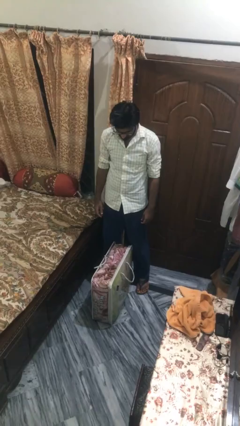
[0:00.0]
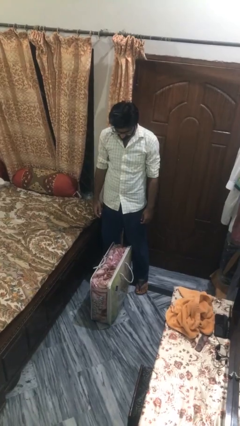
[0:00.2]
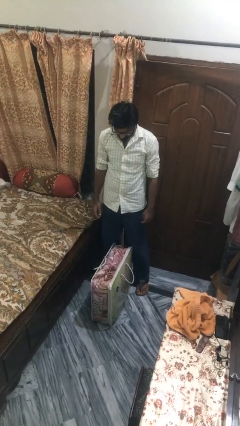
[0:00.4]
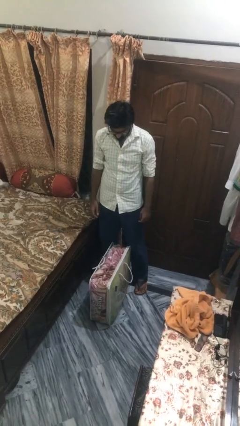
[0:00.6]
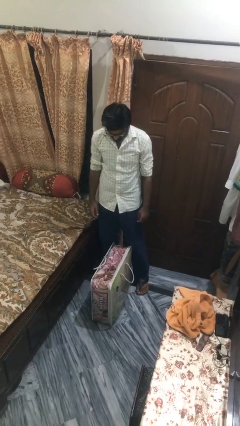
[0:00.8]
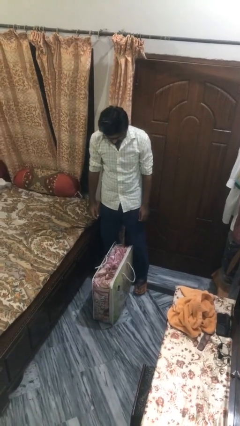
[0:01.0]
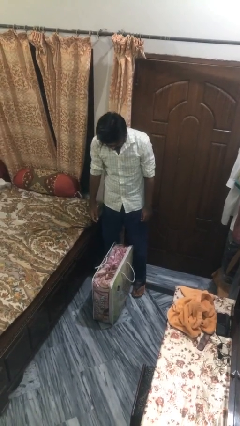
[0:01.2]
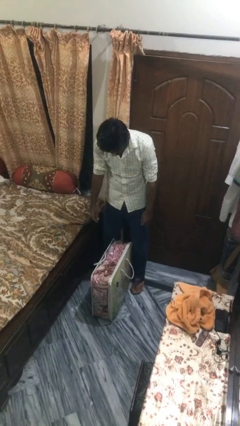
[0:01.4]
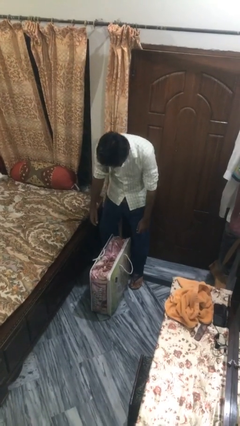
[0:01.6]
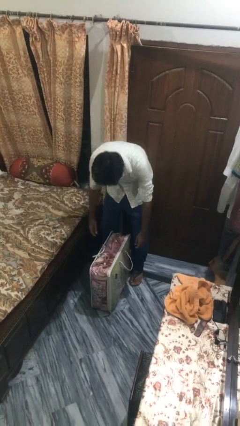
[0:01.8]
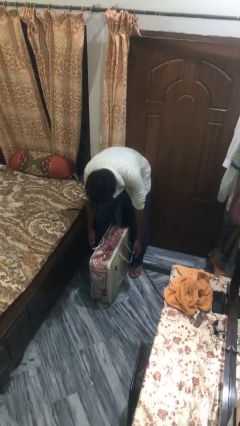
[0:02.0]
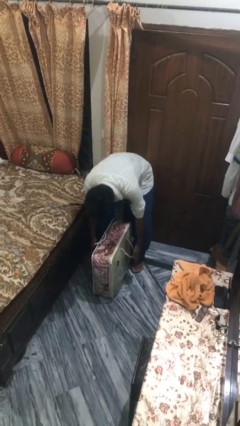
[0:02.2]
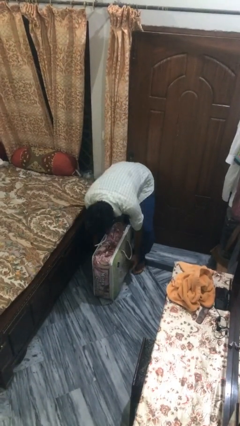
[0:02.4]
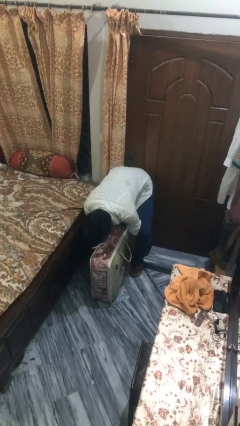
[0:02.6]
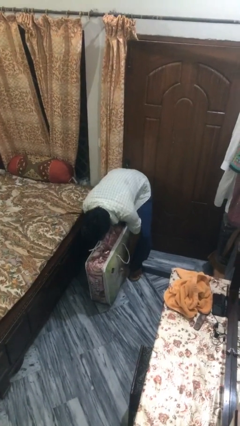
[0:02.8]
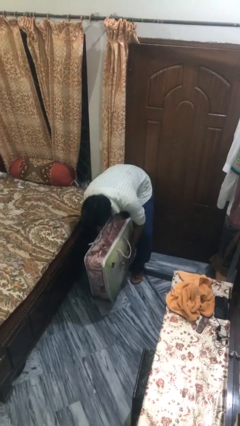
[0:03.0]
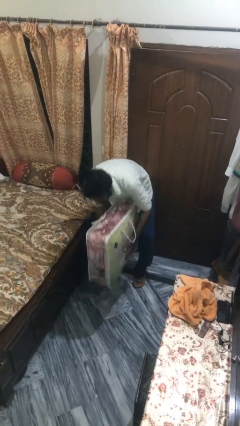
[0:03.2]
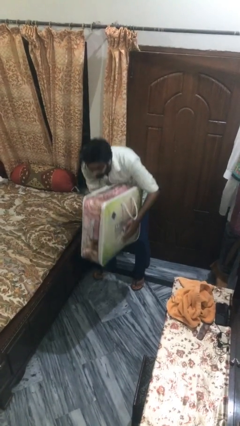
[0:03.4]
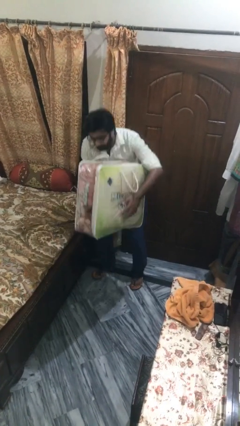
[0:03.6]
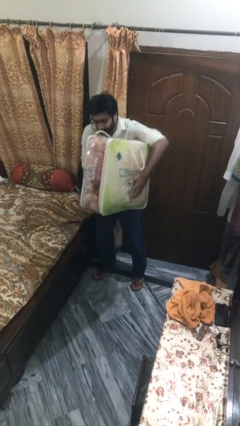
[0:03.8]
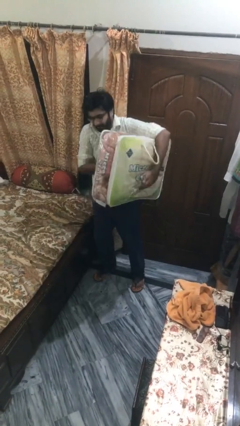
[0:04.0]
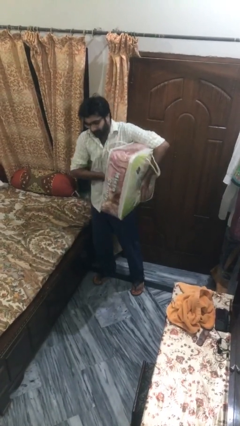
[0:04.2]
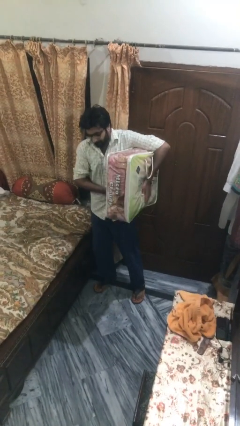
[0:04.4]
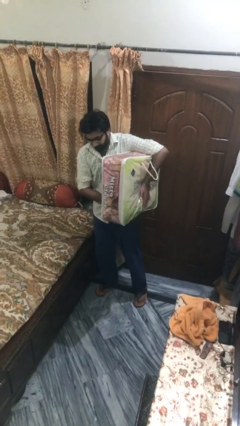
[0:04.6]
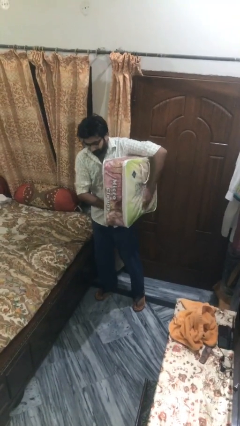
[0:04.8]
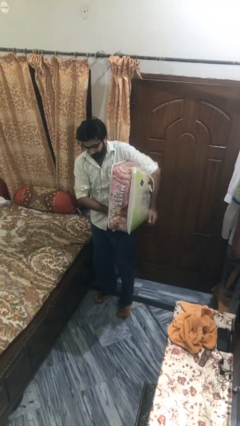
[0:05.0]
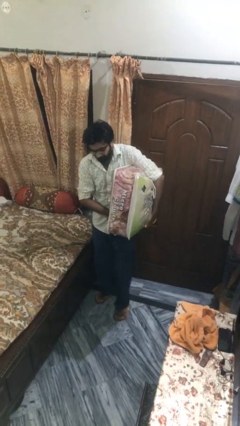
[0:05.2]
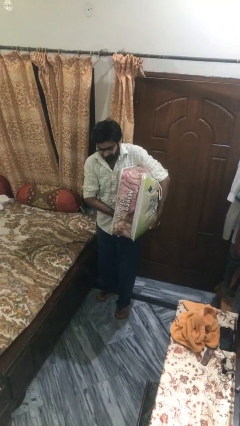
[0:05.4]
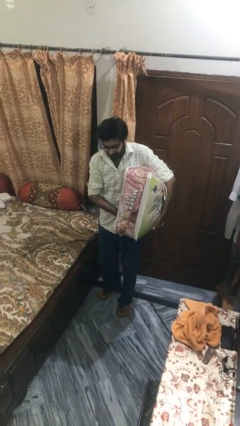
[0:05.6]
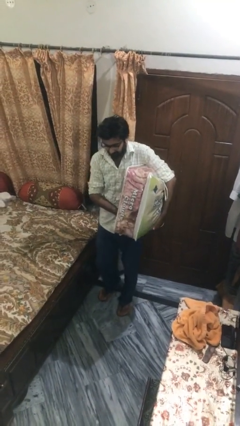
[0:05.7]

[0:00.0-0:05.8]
person picks up object from floor

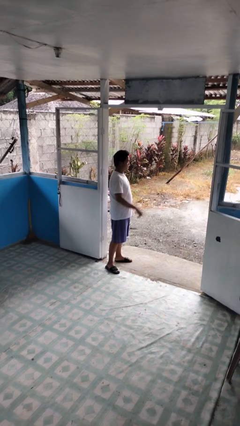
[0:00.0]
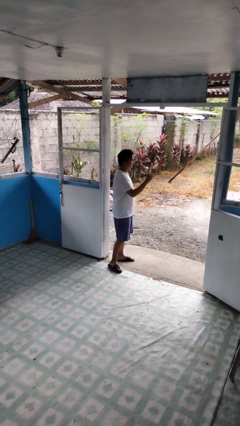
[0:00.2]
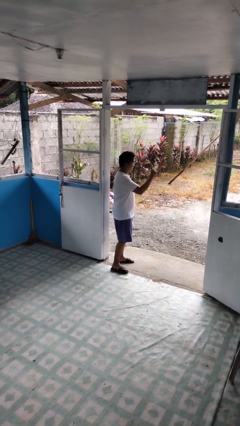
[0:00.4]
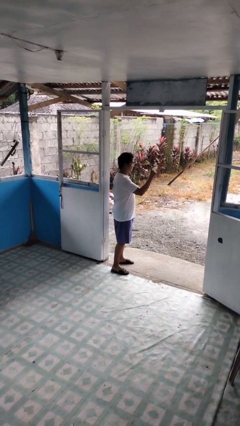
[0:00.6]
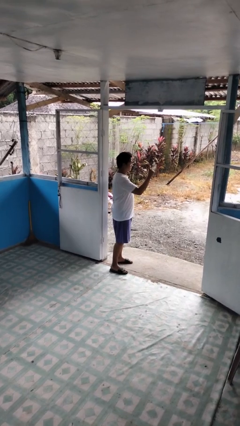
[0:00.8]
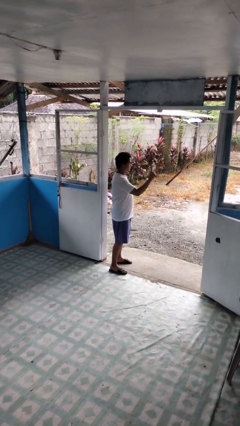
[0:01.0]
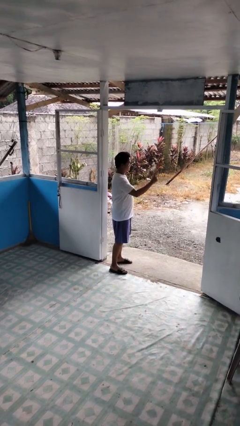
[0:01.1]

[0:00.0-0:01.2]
person gestures number one

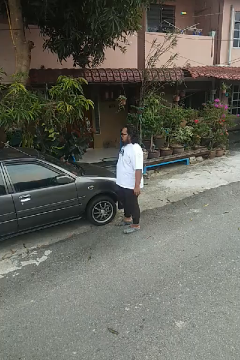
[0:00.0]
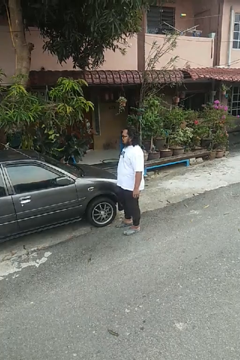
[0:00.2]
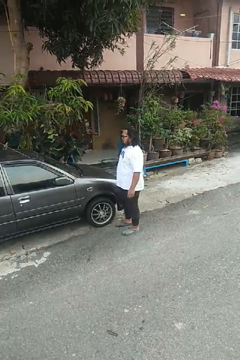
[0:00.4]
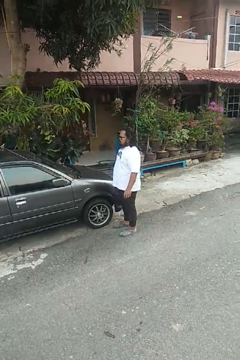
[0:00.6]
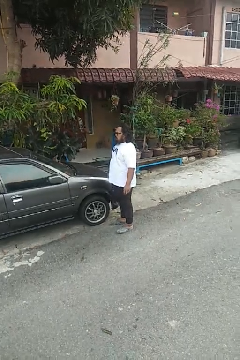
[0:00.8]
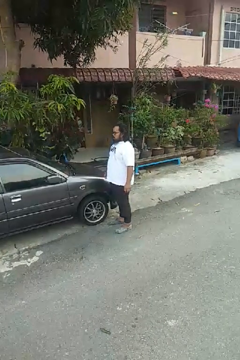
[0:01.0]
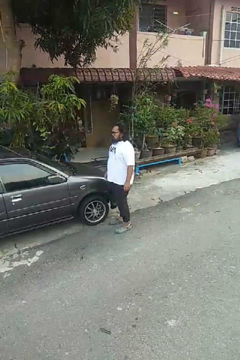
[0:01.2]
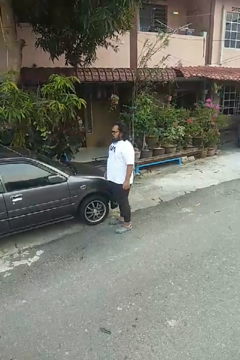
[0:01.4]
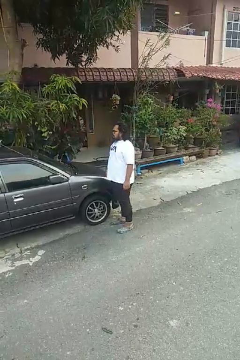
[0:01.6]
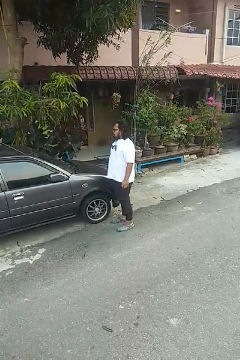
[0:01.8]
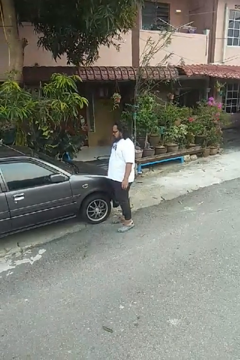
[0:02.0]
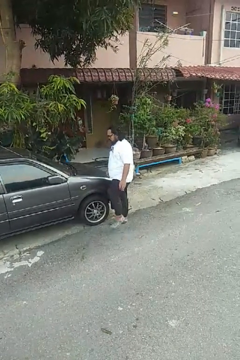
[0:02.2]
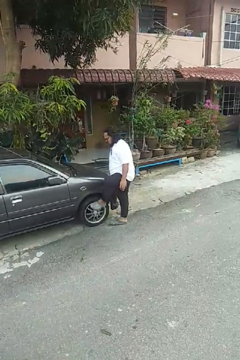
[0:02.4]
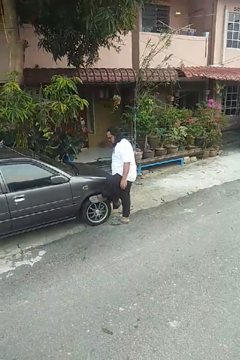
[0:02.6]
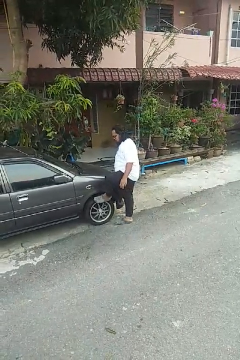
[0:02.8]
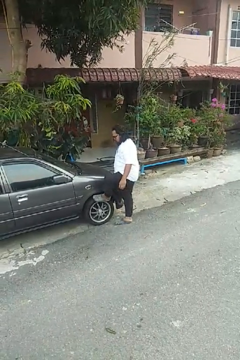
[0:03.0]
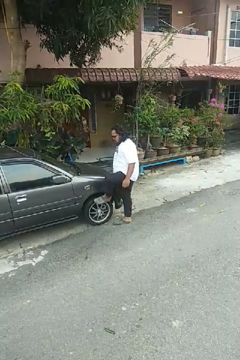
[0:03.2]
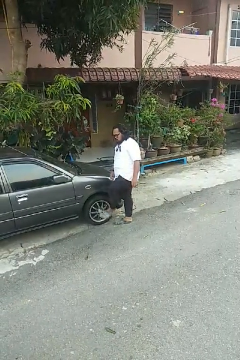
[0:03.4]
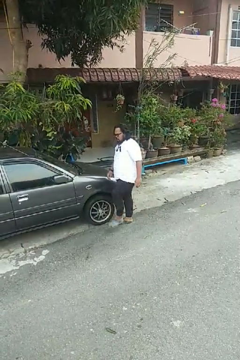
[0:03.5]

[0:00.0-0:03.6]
person kicks car tires

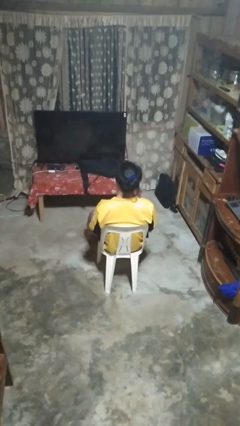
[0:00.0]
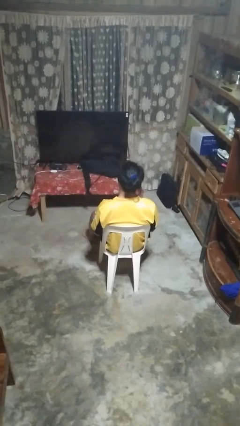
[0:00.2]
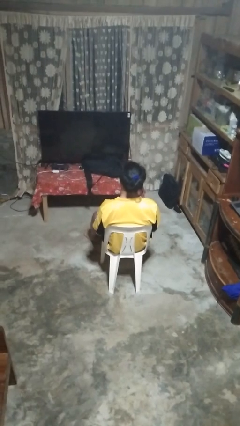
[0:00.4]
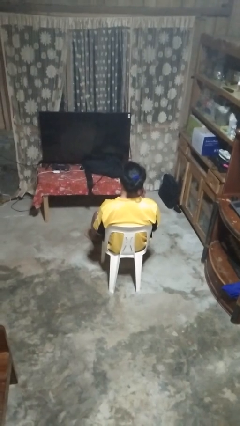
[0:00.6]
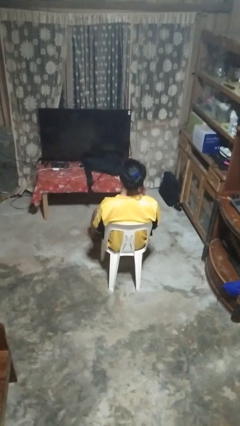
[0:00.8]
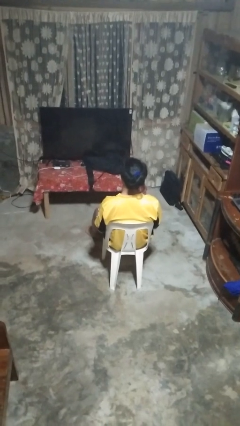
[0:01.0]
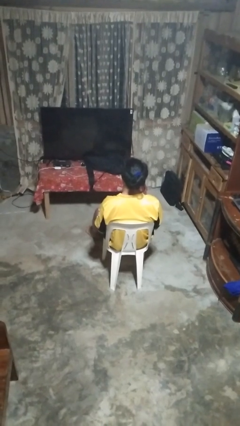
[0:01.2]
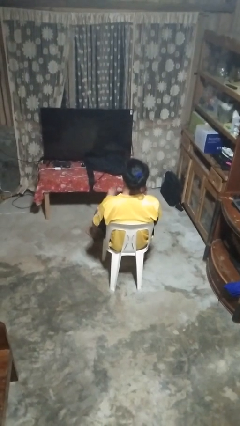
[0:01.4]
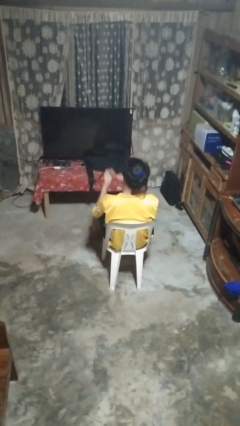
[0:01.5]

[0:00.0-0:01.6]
person files fingernails

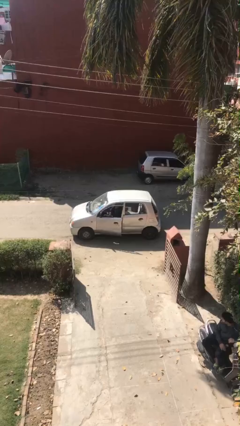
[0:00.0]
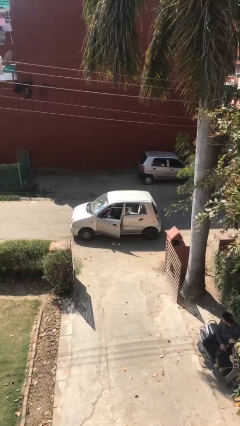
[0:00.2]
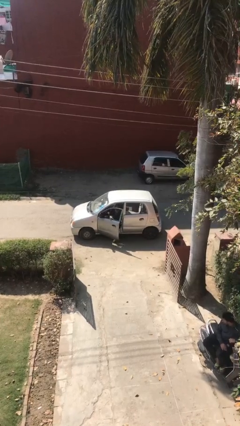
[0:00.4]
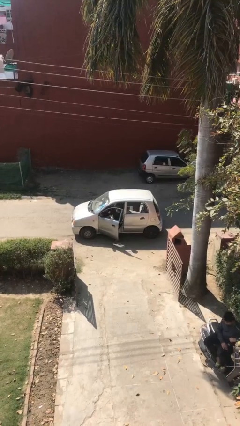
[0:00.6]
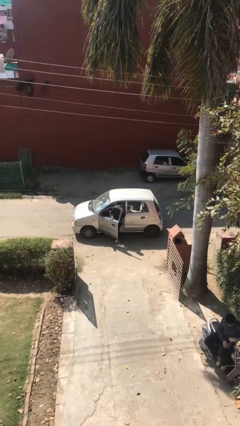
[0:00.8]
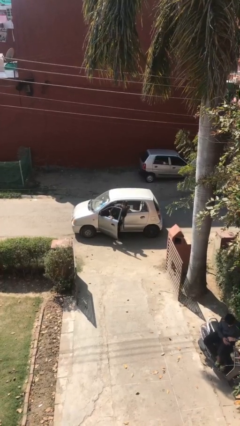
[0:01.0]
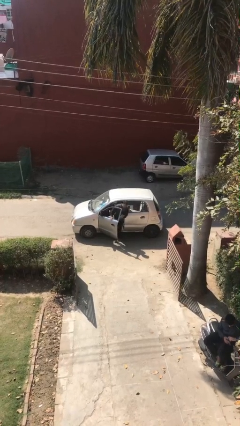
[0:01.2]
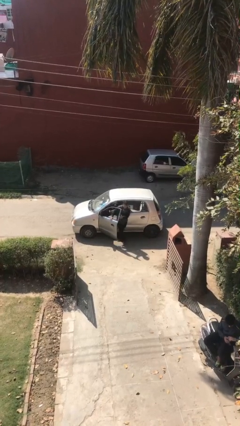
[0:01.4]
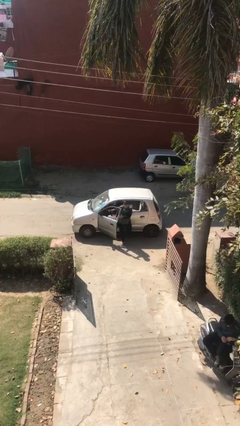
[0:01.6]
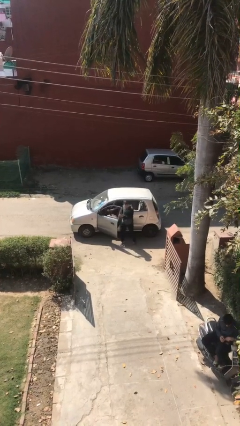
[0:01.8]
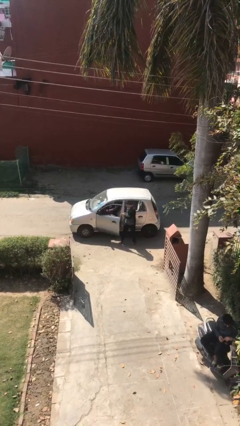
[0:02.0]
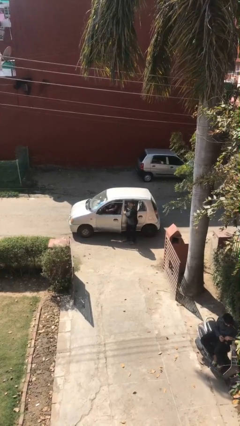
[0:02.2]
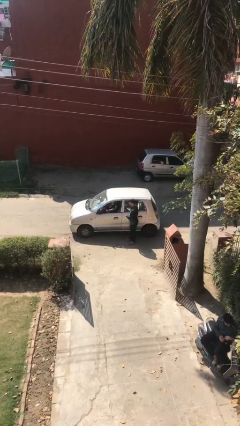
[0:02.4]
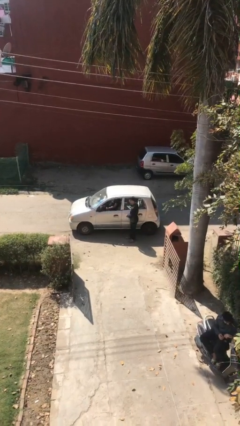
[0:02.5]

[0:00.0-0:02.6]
car drops off person

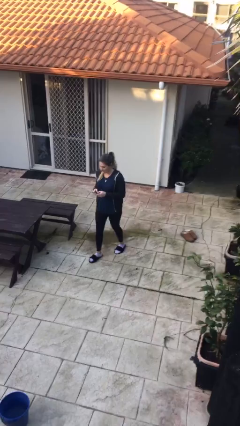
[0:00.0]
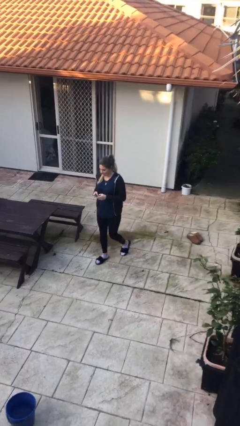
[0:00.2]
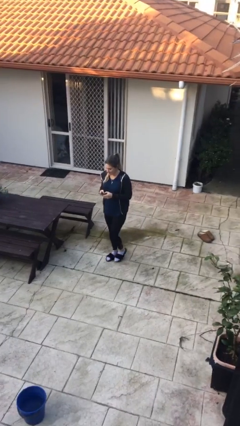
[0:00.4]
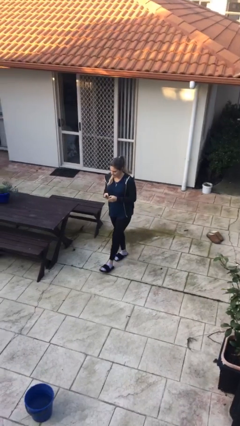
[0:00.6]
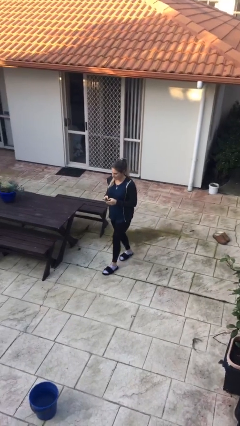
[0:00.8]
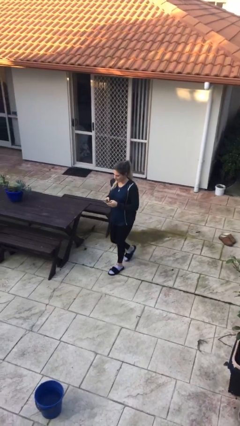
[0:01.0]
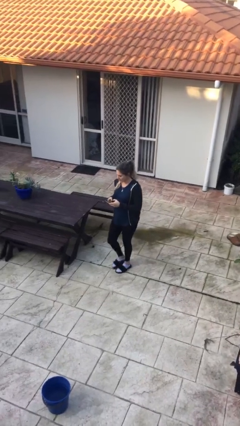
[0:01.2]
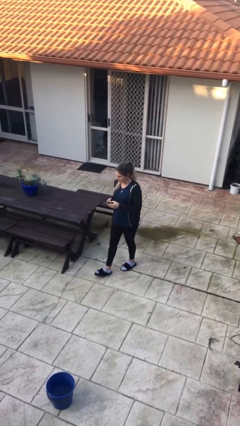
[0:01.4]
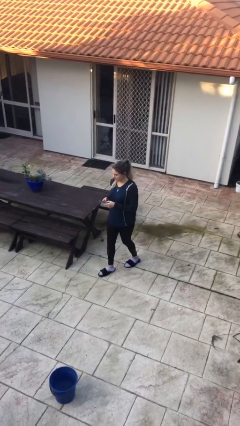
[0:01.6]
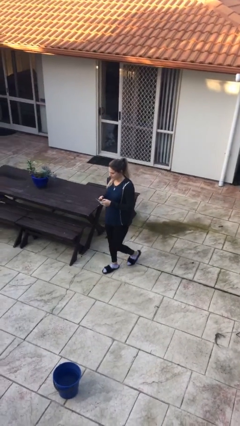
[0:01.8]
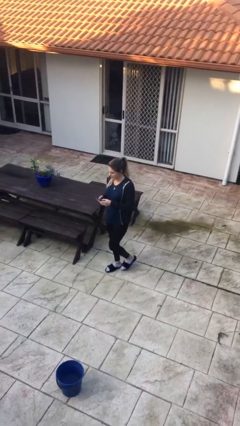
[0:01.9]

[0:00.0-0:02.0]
person texts on phone

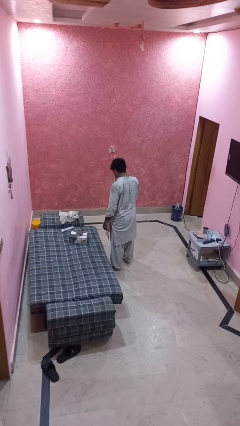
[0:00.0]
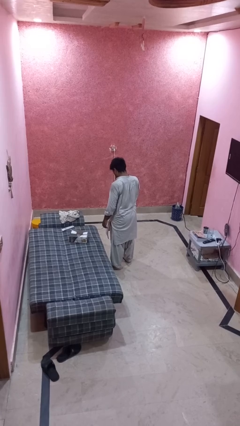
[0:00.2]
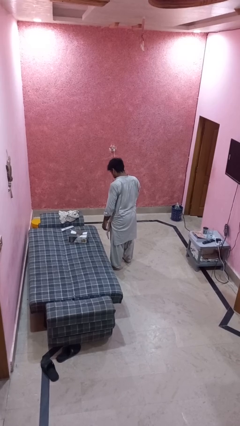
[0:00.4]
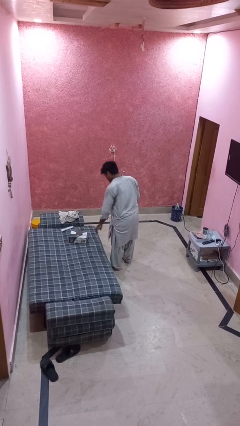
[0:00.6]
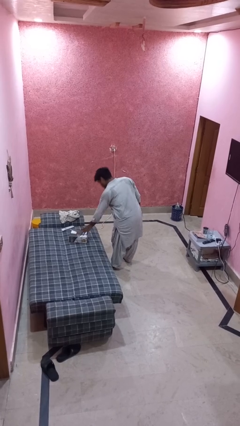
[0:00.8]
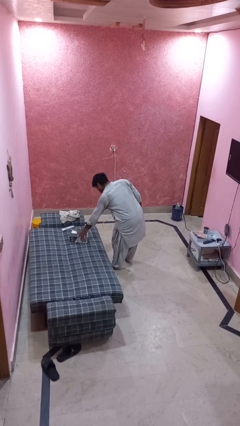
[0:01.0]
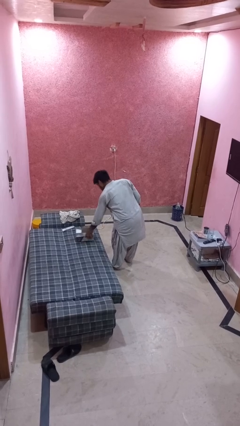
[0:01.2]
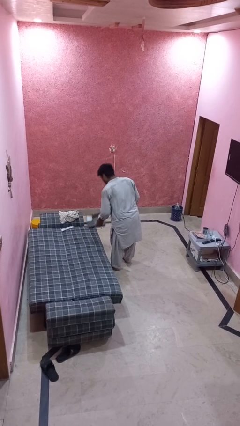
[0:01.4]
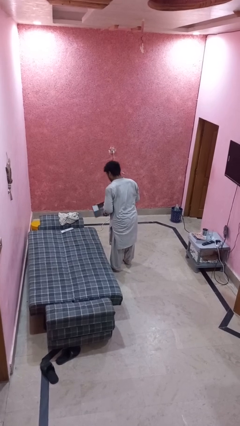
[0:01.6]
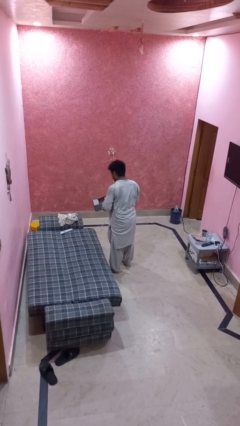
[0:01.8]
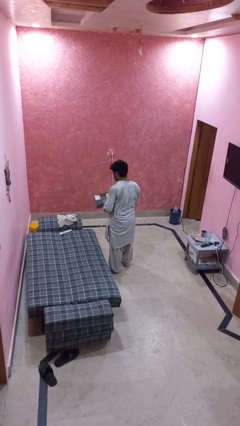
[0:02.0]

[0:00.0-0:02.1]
person picks up object from bed
